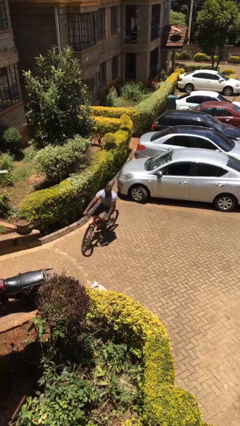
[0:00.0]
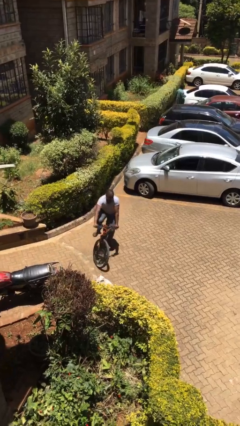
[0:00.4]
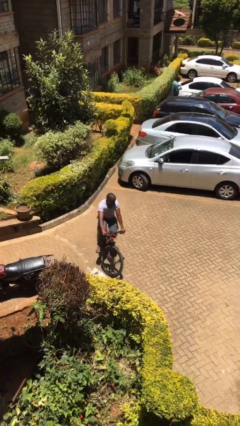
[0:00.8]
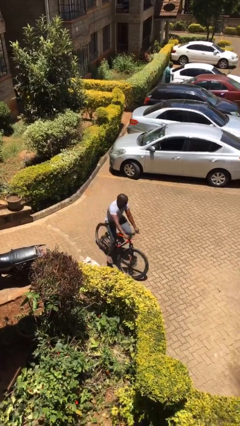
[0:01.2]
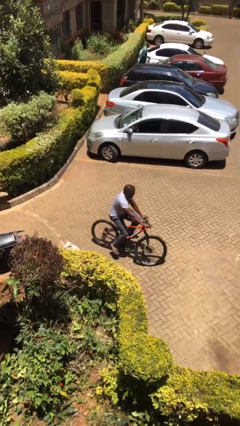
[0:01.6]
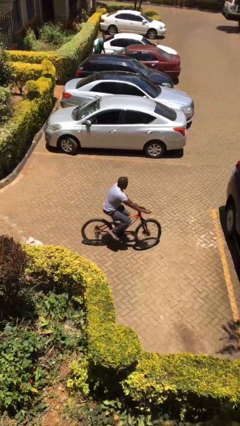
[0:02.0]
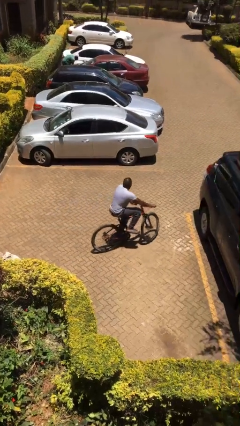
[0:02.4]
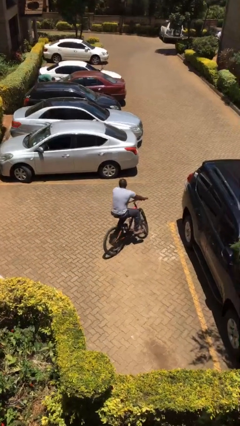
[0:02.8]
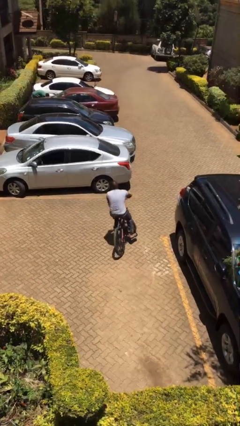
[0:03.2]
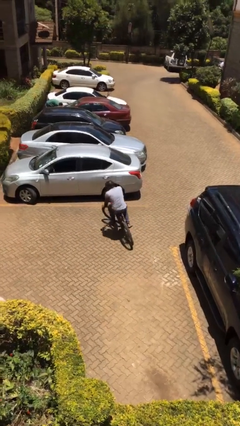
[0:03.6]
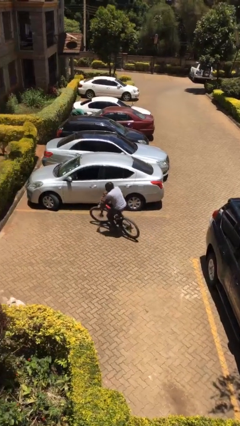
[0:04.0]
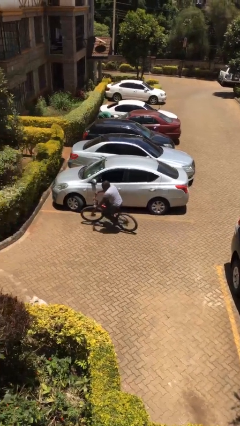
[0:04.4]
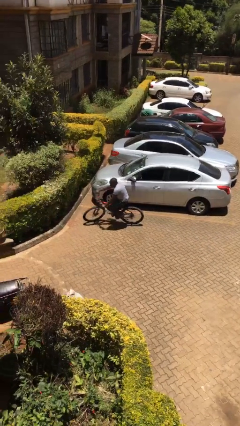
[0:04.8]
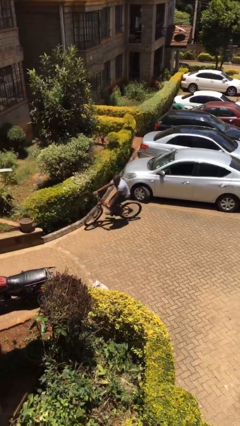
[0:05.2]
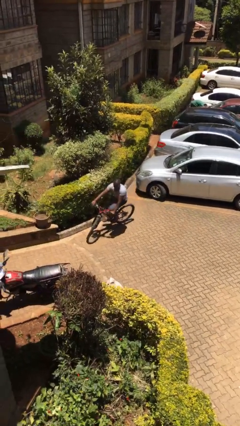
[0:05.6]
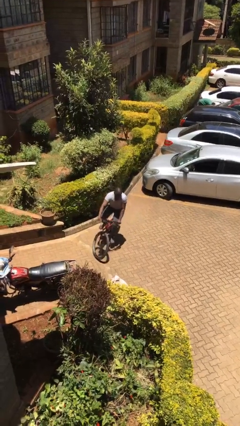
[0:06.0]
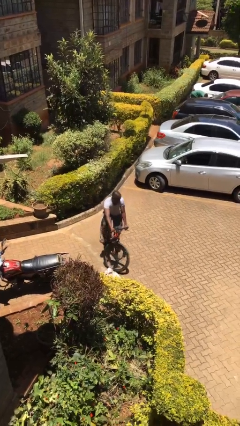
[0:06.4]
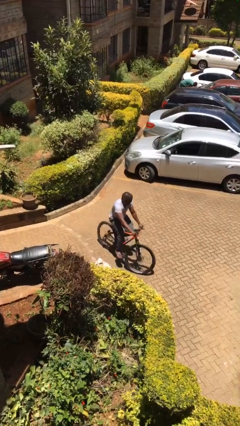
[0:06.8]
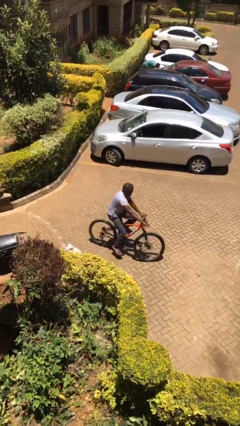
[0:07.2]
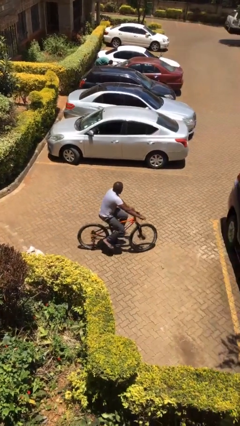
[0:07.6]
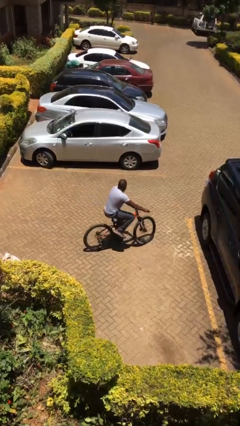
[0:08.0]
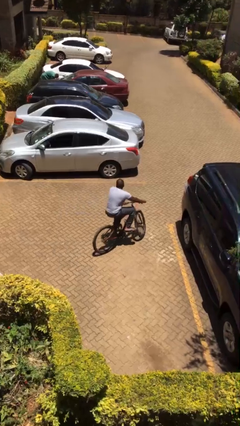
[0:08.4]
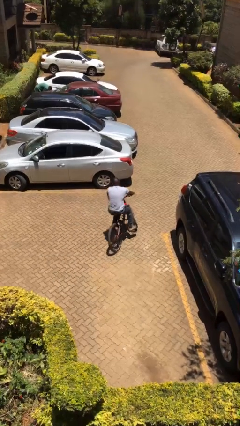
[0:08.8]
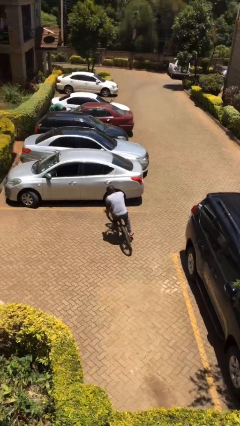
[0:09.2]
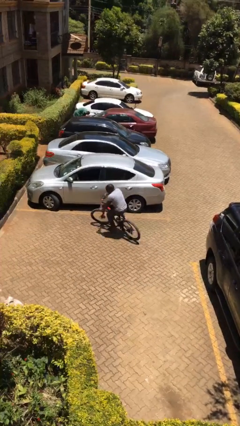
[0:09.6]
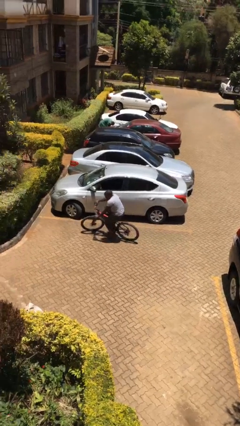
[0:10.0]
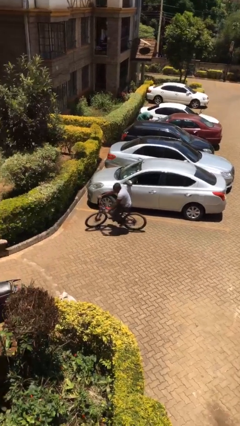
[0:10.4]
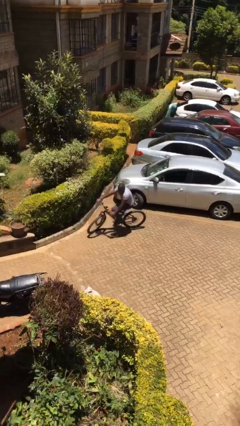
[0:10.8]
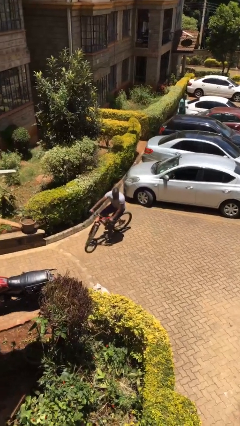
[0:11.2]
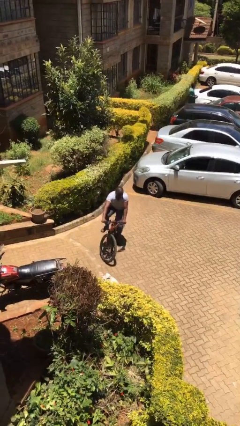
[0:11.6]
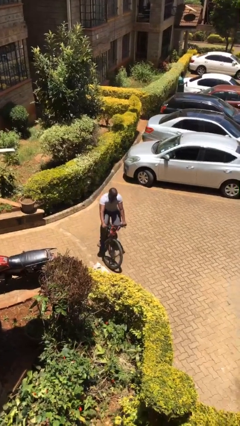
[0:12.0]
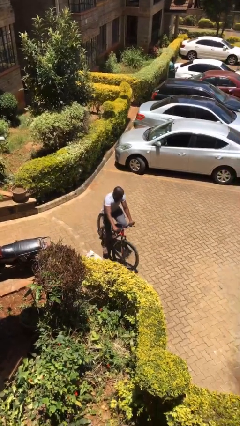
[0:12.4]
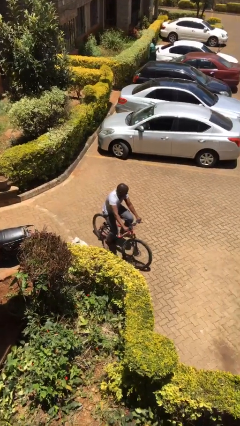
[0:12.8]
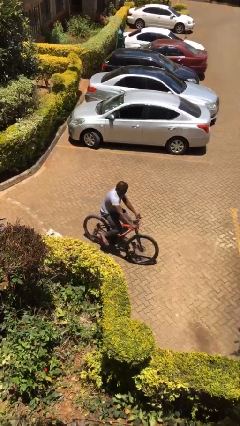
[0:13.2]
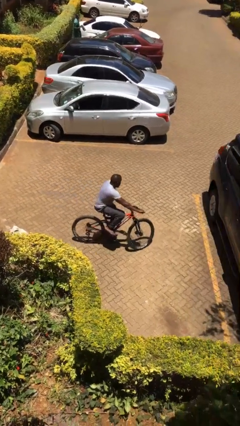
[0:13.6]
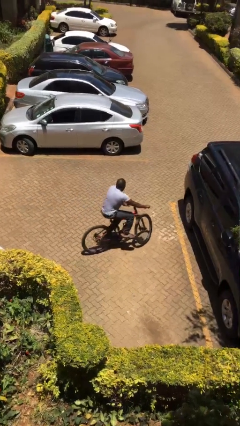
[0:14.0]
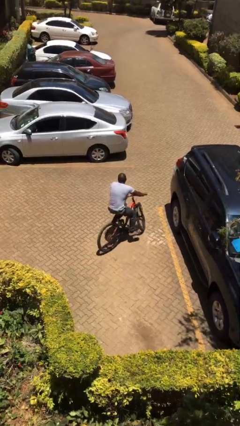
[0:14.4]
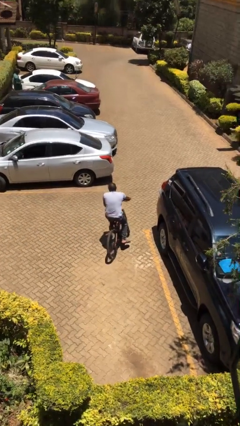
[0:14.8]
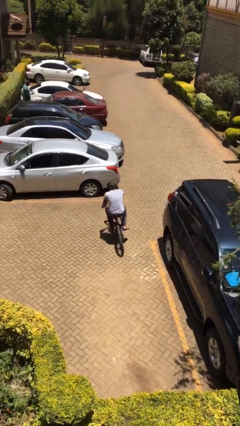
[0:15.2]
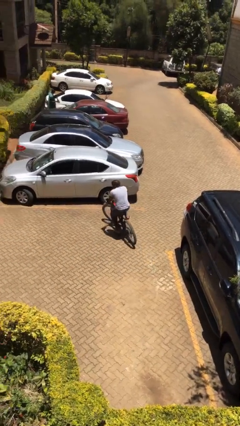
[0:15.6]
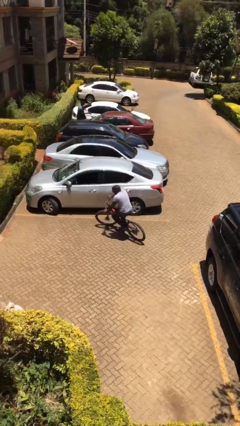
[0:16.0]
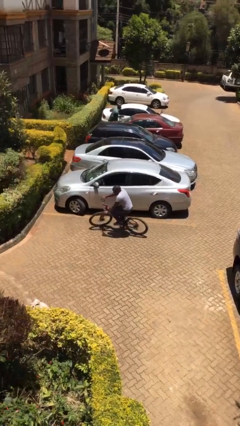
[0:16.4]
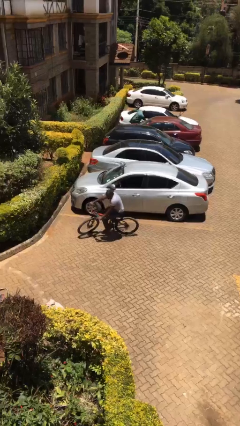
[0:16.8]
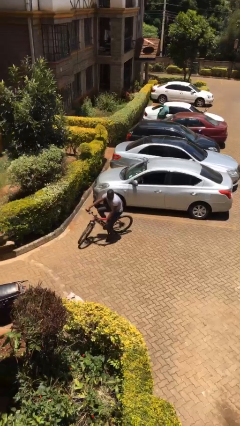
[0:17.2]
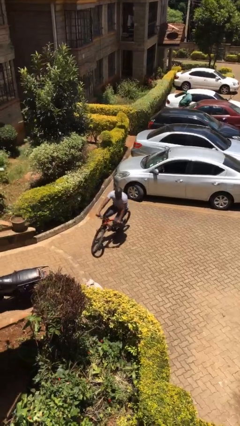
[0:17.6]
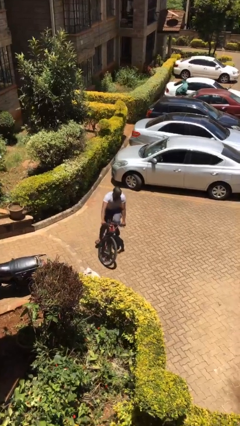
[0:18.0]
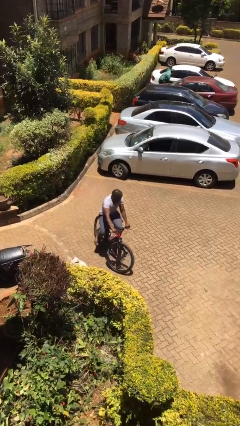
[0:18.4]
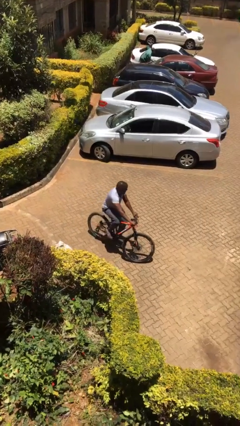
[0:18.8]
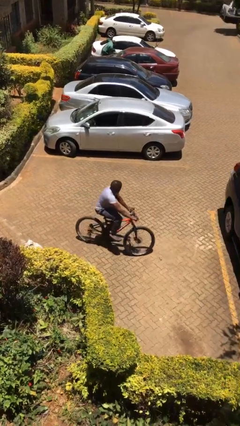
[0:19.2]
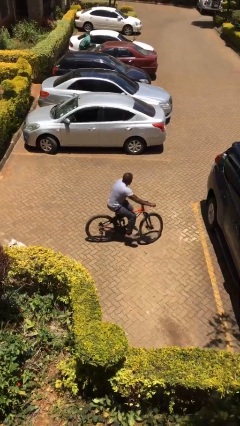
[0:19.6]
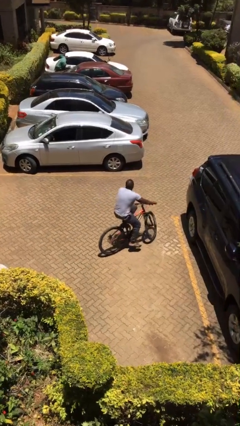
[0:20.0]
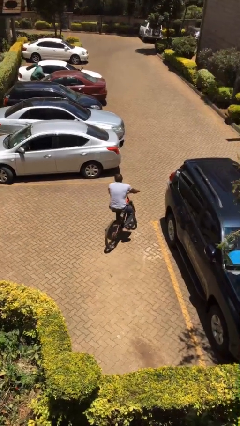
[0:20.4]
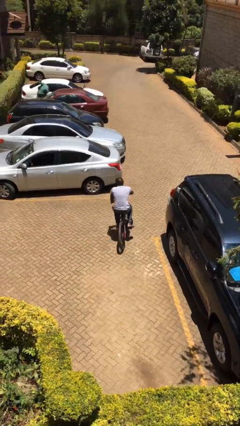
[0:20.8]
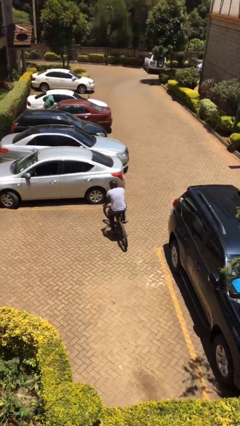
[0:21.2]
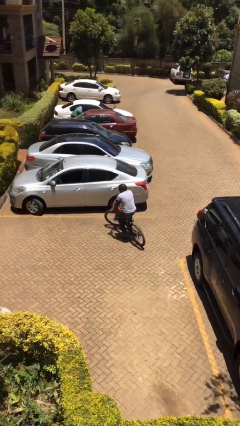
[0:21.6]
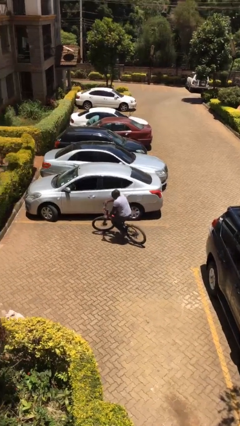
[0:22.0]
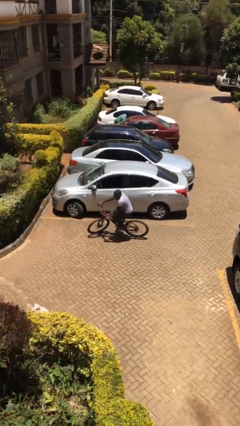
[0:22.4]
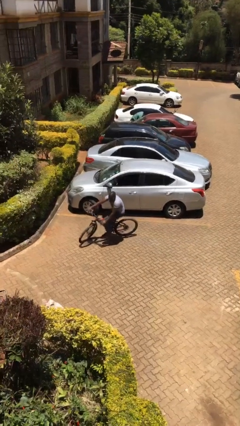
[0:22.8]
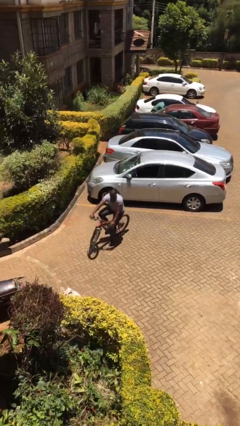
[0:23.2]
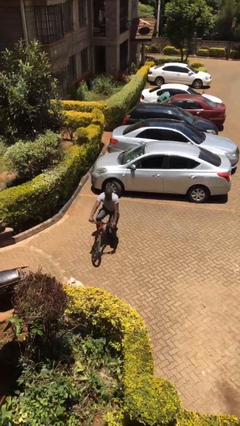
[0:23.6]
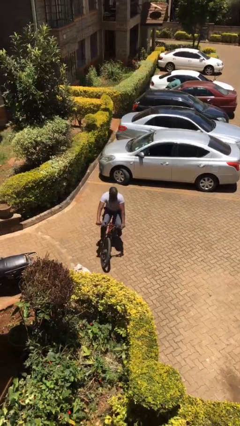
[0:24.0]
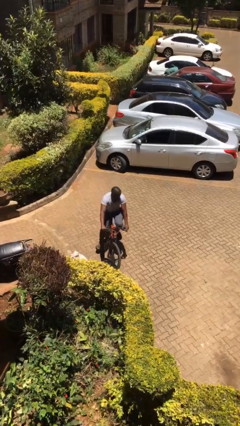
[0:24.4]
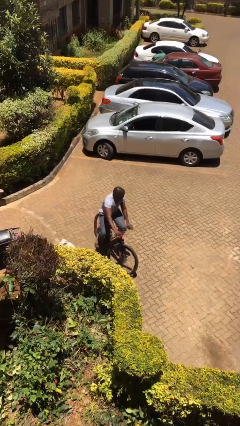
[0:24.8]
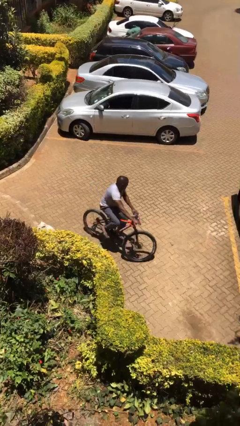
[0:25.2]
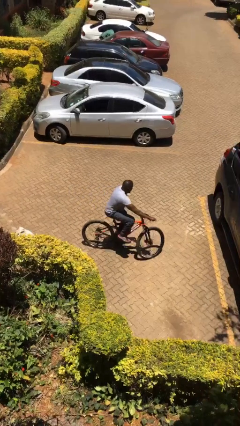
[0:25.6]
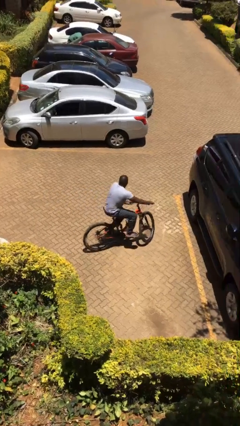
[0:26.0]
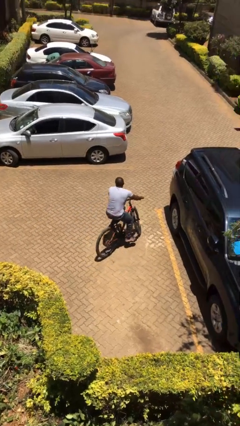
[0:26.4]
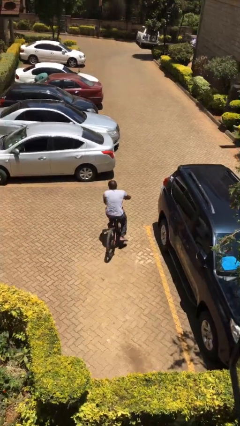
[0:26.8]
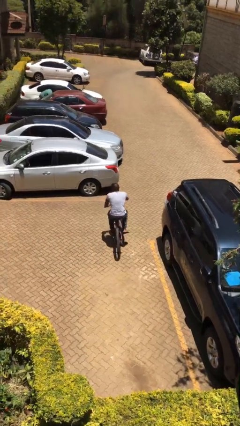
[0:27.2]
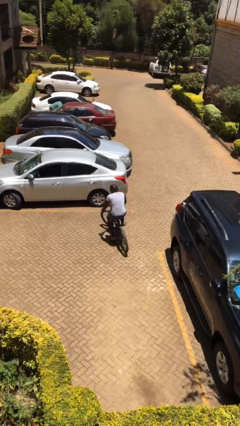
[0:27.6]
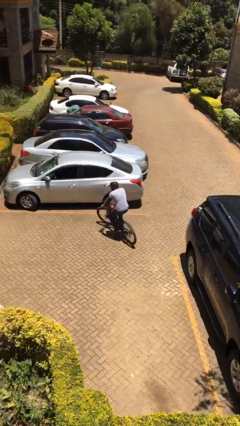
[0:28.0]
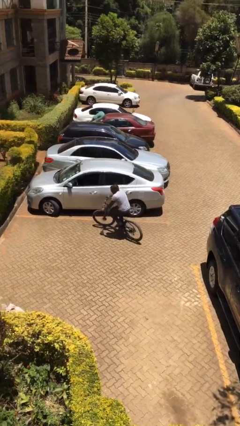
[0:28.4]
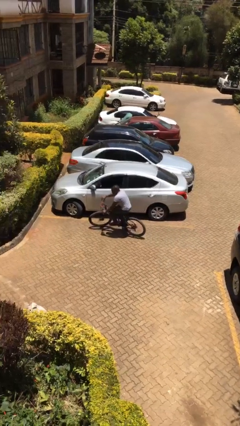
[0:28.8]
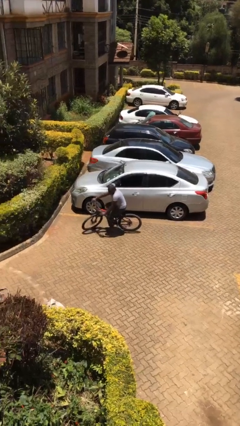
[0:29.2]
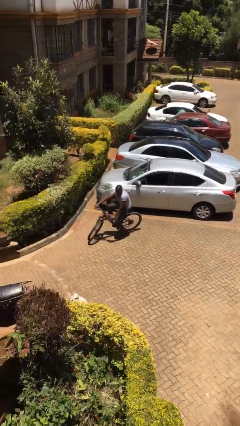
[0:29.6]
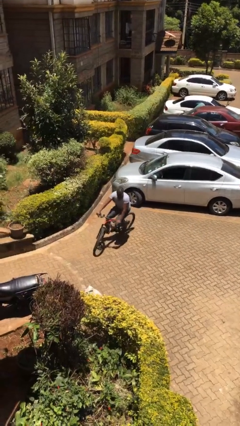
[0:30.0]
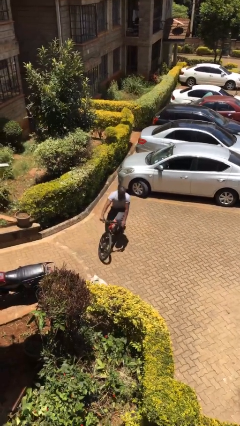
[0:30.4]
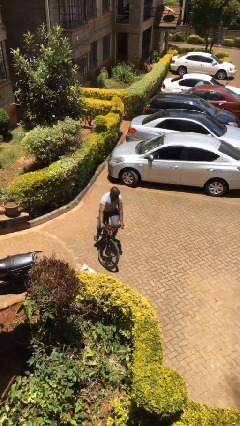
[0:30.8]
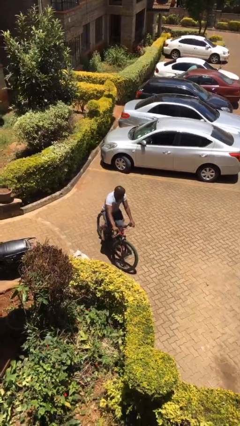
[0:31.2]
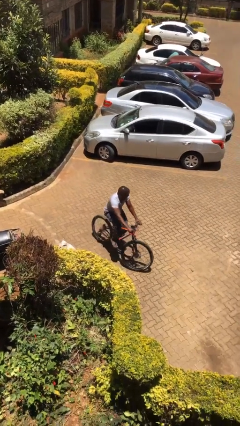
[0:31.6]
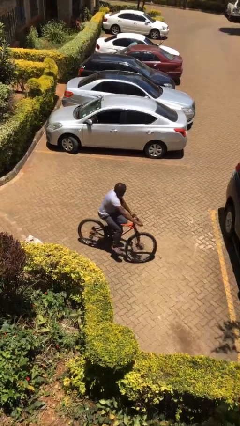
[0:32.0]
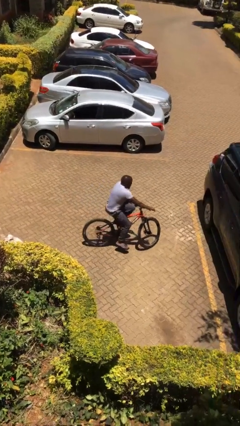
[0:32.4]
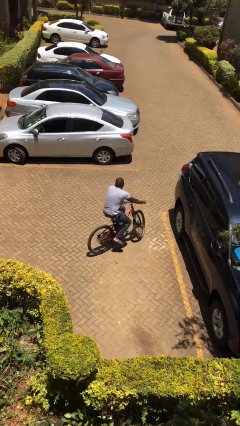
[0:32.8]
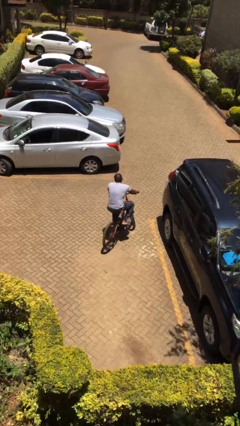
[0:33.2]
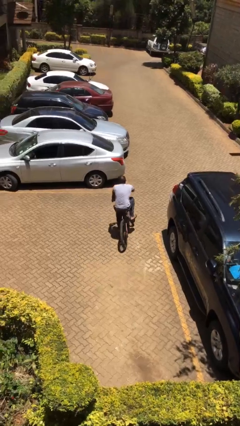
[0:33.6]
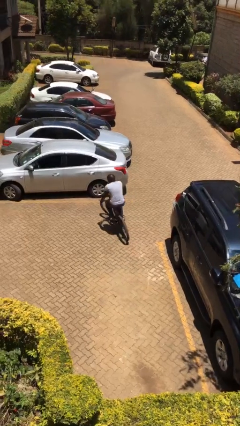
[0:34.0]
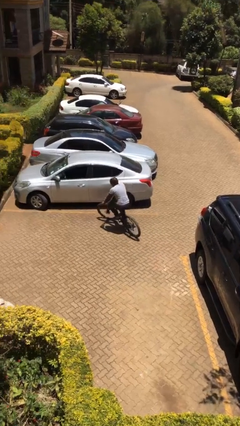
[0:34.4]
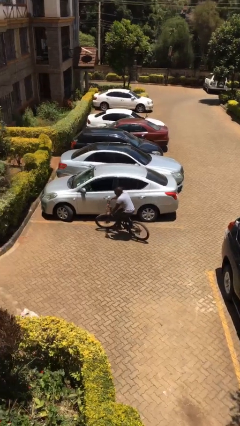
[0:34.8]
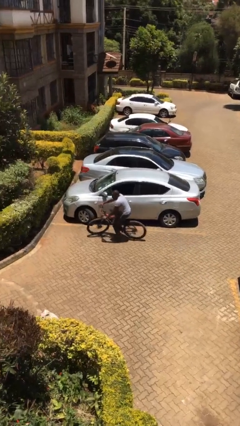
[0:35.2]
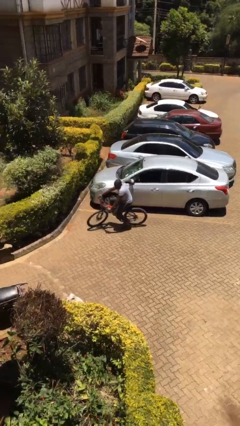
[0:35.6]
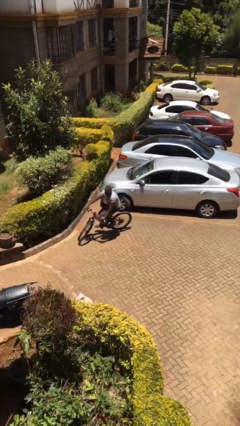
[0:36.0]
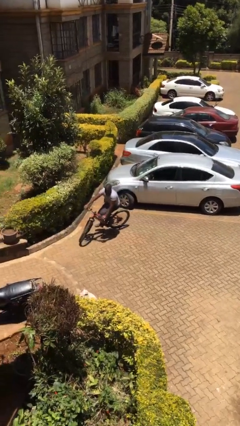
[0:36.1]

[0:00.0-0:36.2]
person rides bicycle

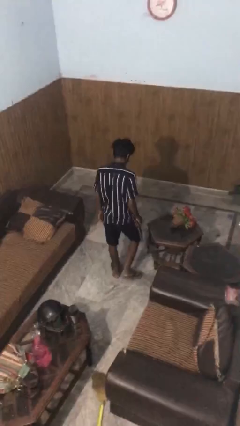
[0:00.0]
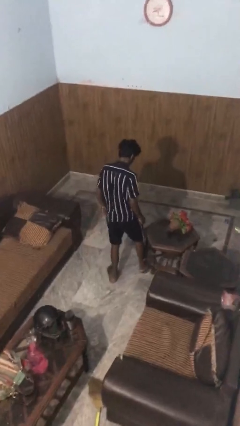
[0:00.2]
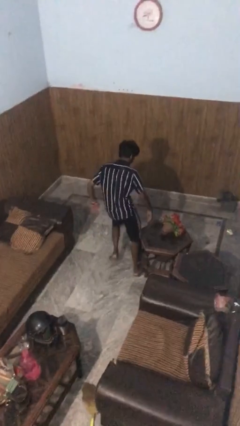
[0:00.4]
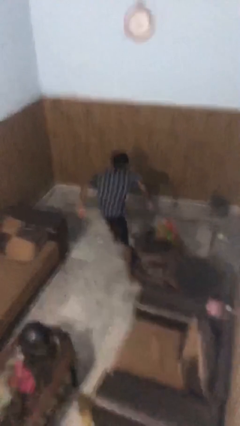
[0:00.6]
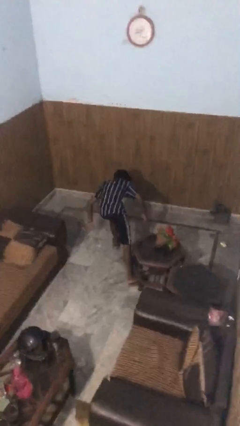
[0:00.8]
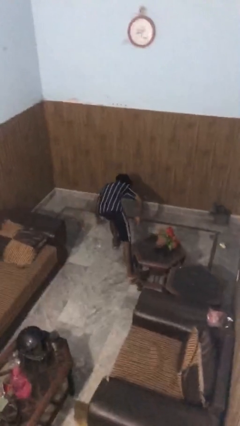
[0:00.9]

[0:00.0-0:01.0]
person trips on object on floor
